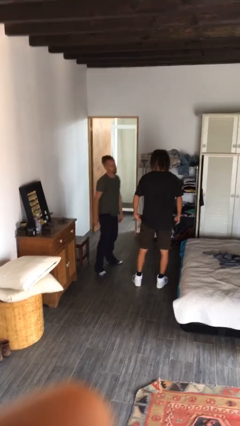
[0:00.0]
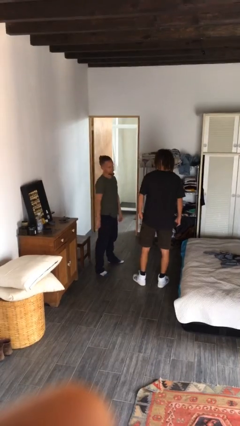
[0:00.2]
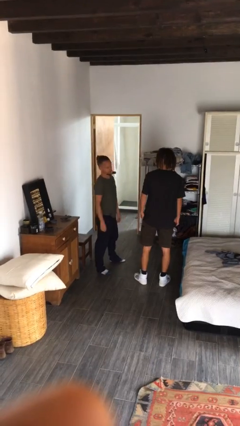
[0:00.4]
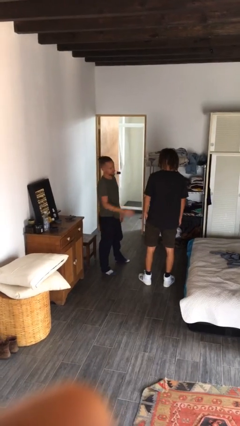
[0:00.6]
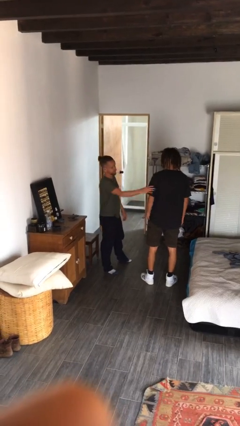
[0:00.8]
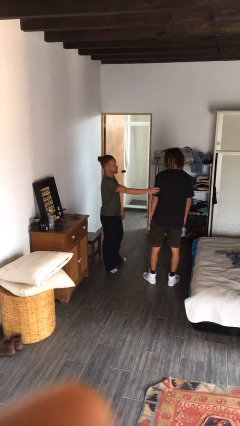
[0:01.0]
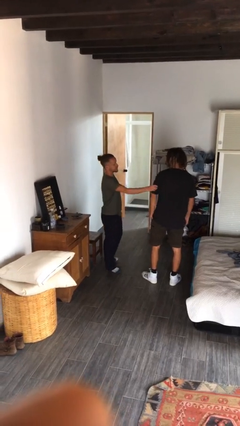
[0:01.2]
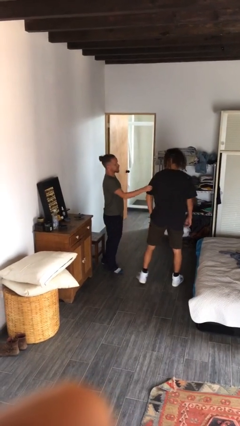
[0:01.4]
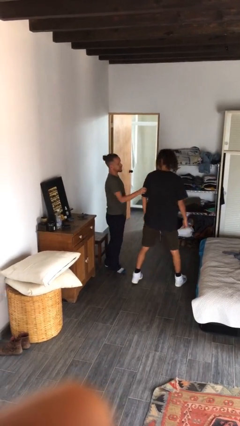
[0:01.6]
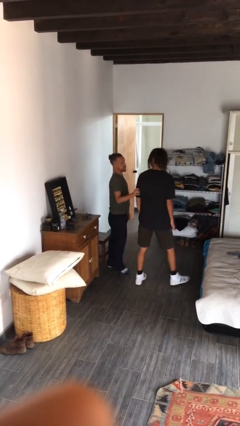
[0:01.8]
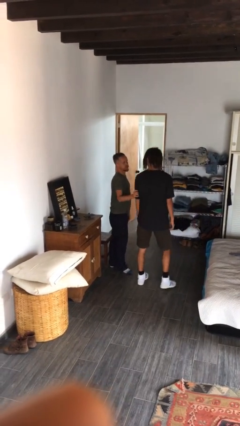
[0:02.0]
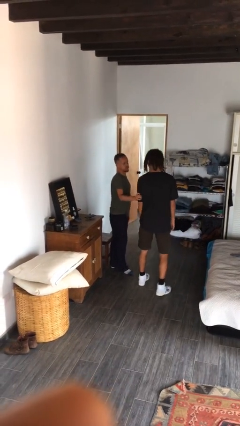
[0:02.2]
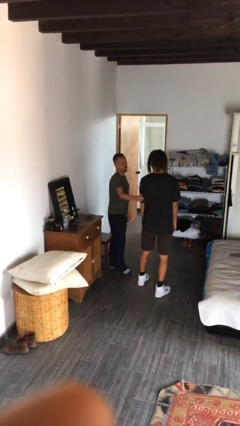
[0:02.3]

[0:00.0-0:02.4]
person grabs person by forearm

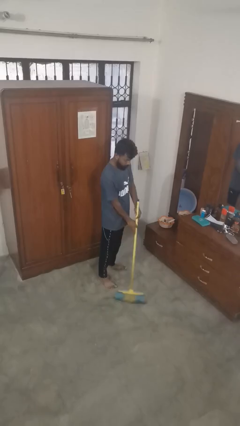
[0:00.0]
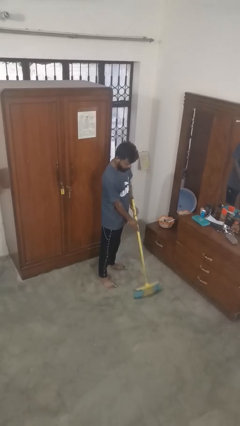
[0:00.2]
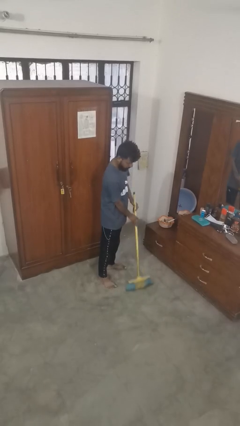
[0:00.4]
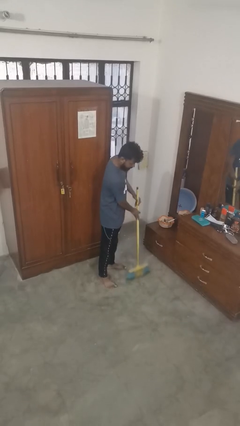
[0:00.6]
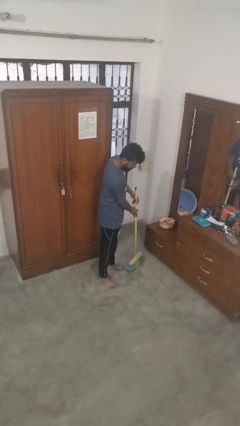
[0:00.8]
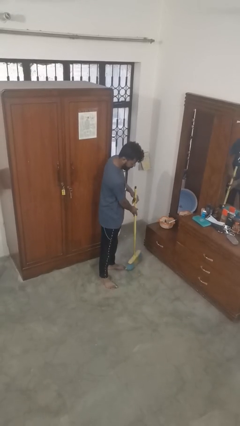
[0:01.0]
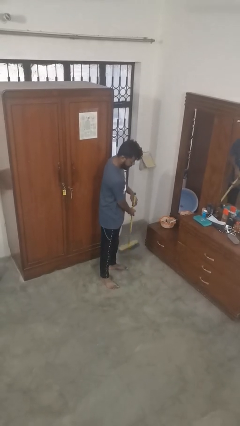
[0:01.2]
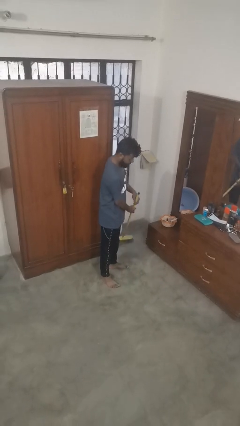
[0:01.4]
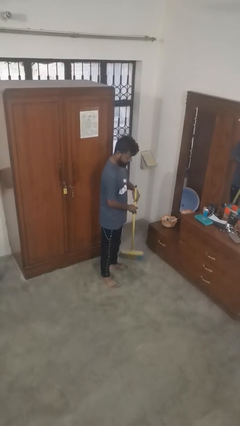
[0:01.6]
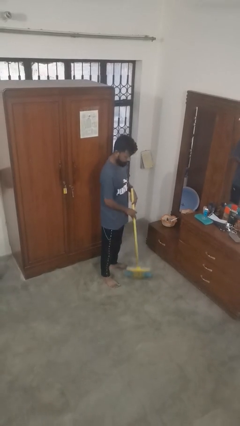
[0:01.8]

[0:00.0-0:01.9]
person sweeps floor

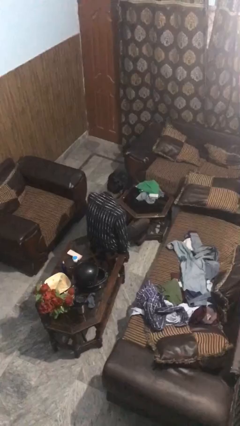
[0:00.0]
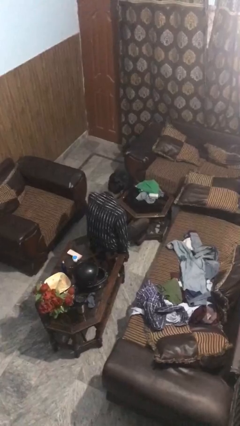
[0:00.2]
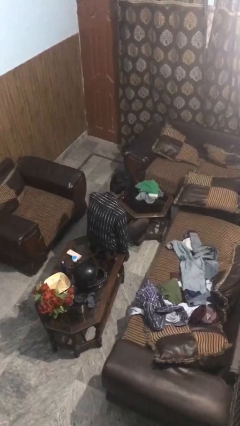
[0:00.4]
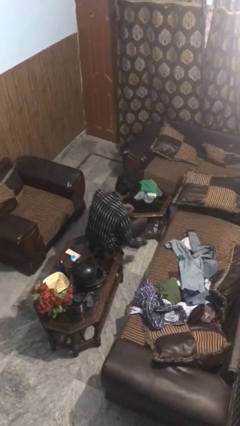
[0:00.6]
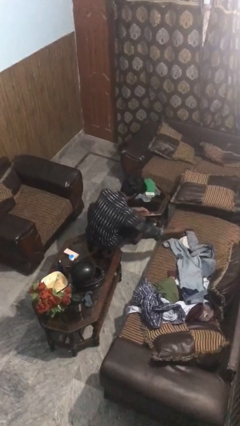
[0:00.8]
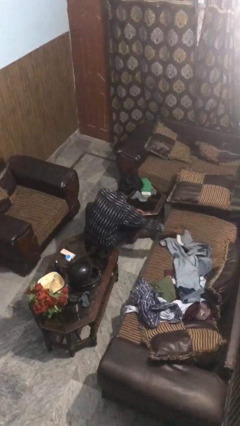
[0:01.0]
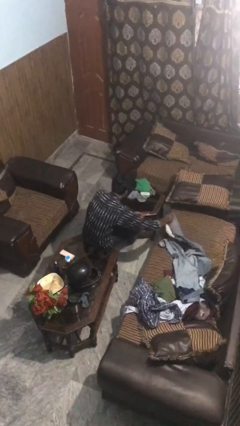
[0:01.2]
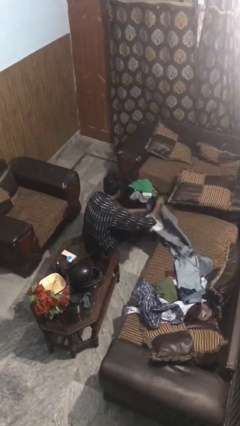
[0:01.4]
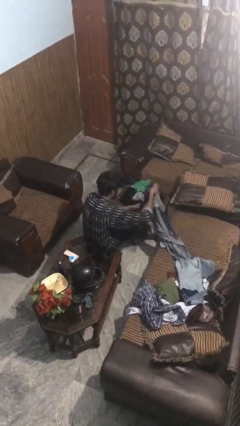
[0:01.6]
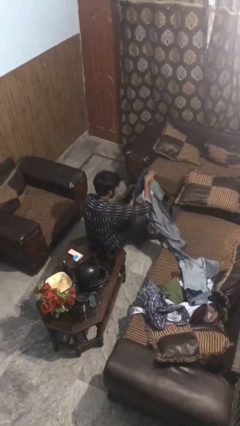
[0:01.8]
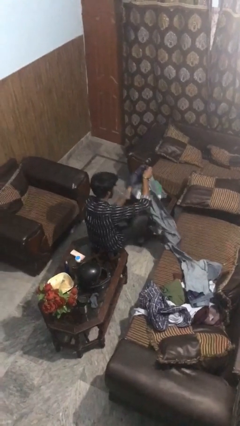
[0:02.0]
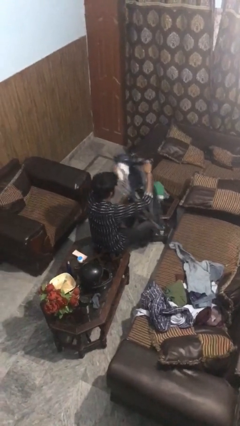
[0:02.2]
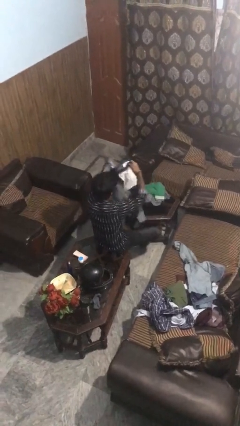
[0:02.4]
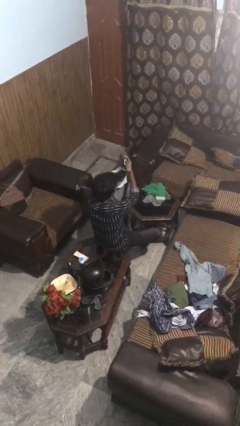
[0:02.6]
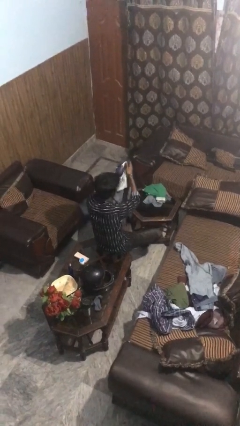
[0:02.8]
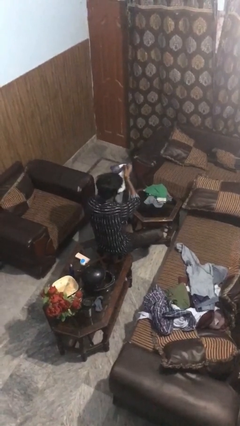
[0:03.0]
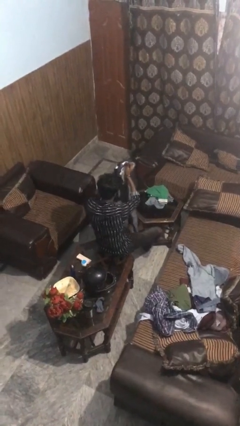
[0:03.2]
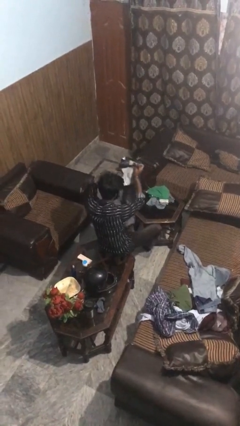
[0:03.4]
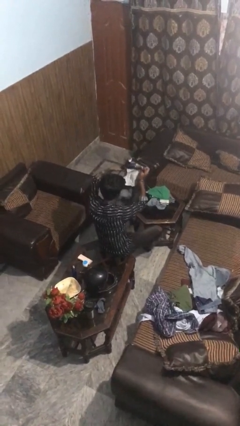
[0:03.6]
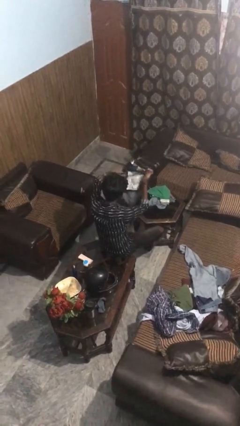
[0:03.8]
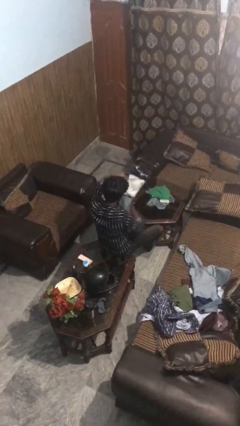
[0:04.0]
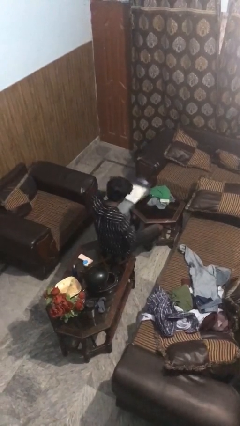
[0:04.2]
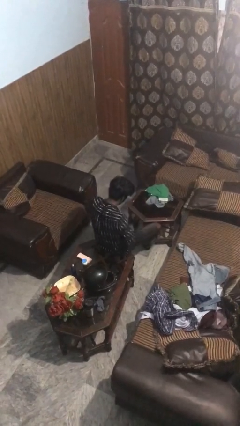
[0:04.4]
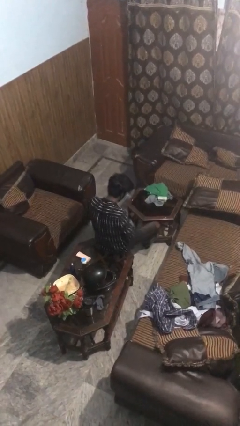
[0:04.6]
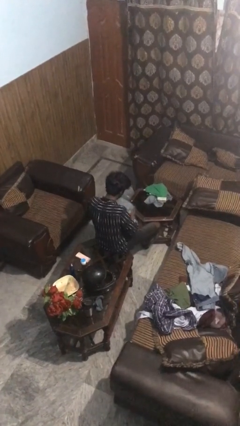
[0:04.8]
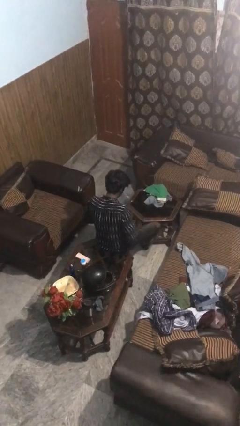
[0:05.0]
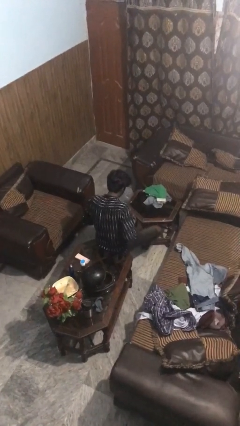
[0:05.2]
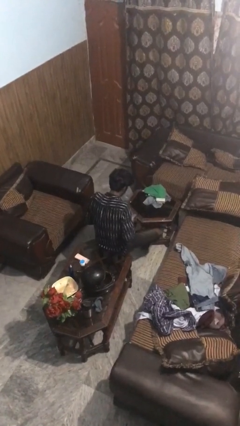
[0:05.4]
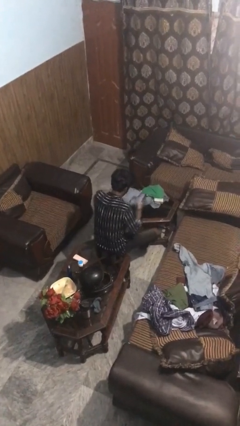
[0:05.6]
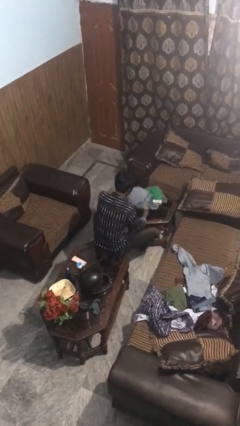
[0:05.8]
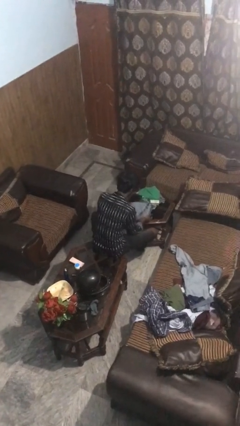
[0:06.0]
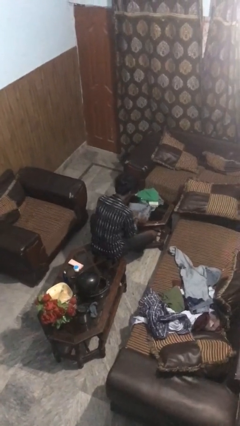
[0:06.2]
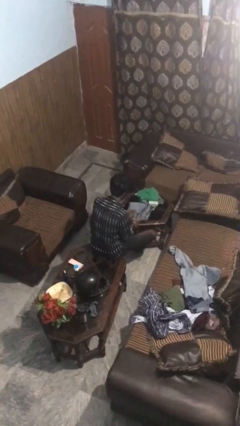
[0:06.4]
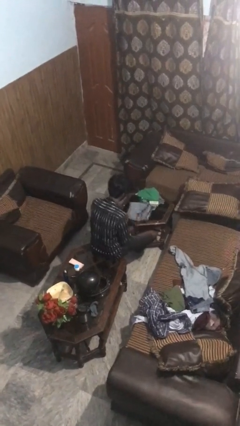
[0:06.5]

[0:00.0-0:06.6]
person folds pants

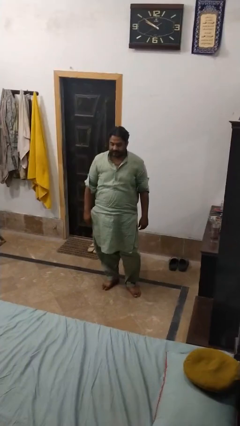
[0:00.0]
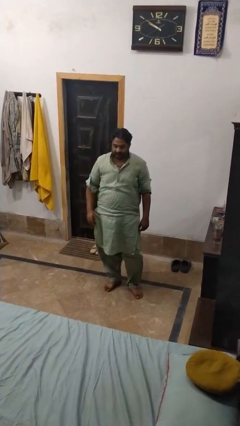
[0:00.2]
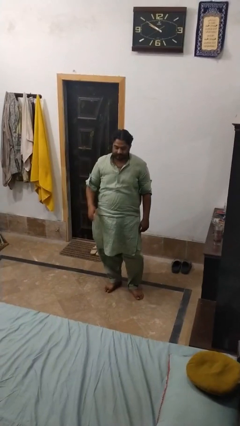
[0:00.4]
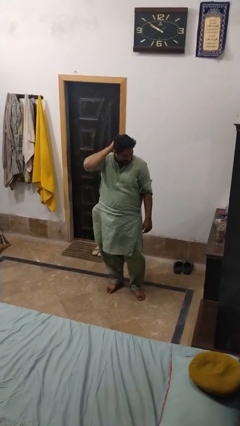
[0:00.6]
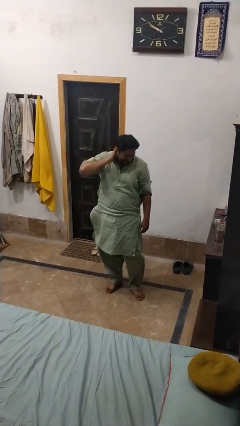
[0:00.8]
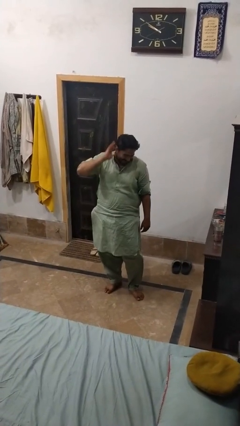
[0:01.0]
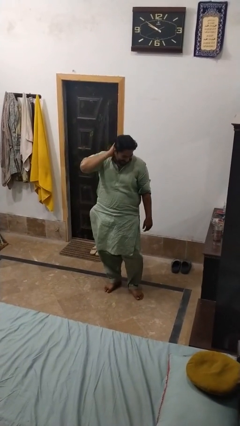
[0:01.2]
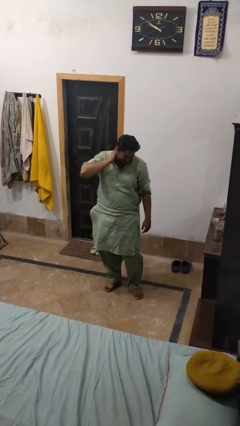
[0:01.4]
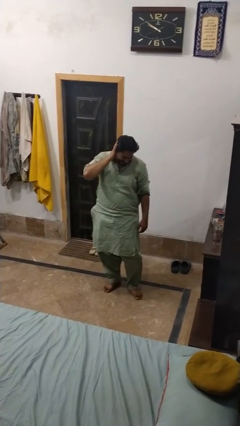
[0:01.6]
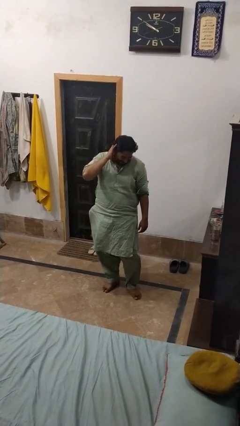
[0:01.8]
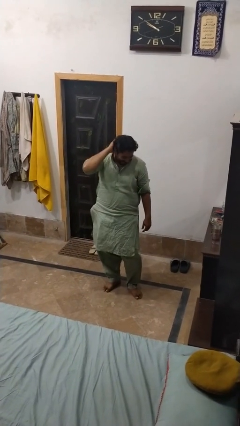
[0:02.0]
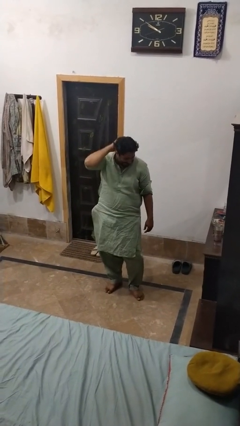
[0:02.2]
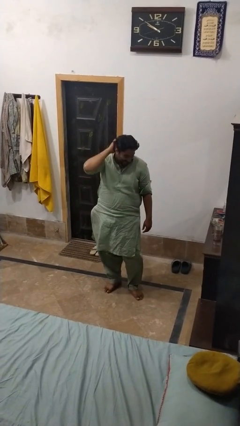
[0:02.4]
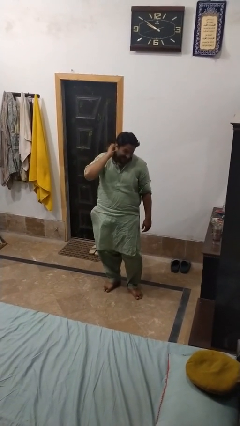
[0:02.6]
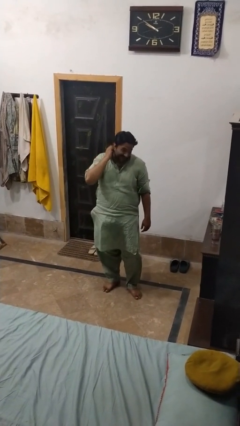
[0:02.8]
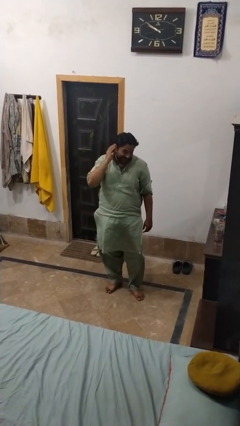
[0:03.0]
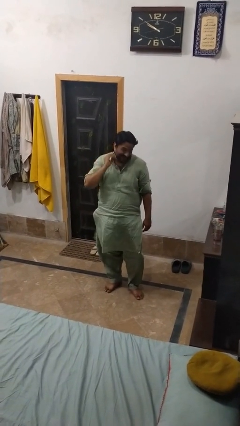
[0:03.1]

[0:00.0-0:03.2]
person swats bug

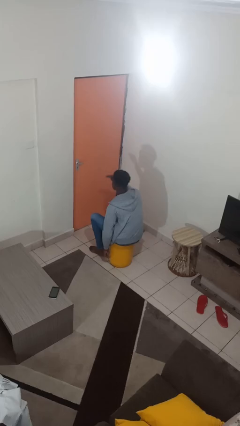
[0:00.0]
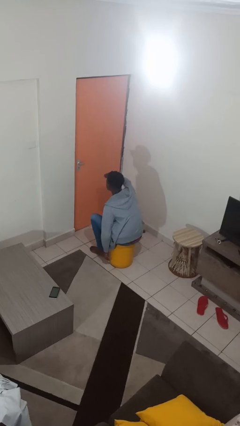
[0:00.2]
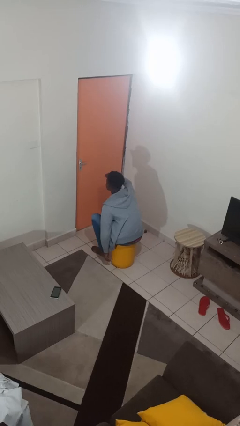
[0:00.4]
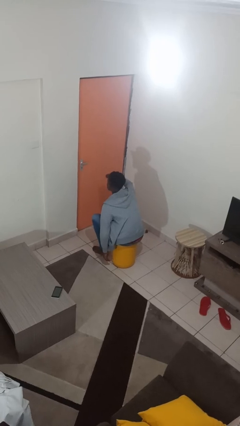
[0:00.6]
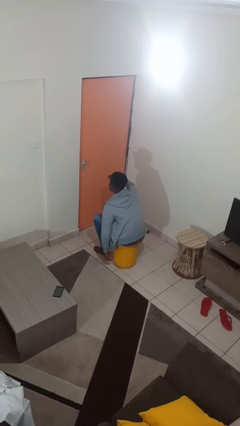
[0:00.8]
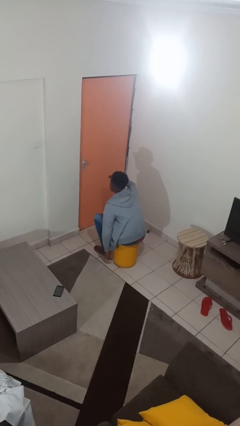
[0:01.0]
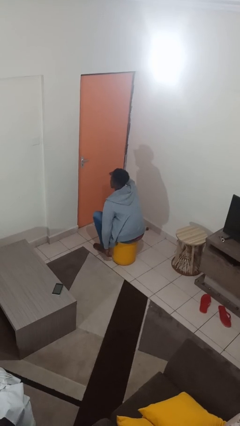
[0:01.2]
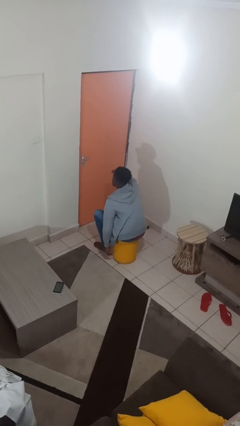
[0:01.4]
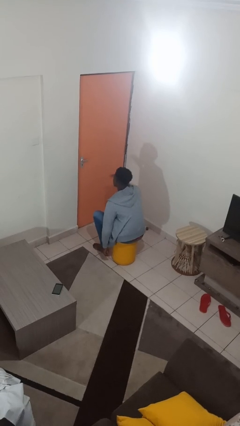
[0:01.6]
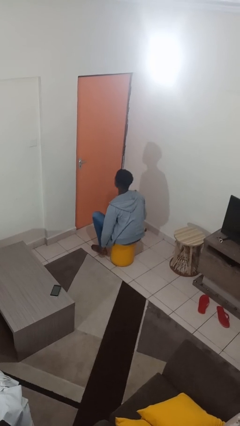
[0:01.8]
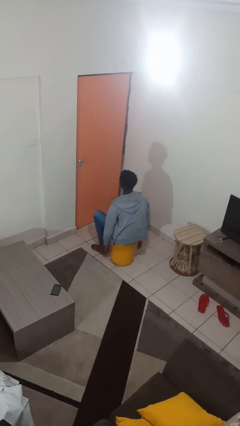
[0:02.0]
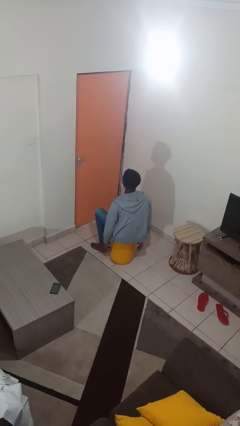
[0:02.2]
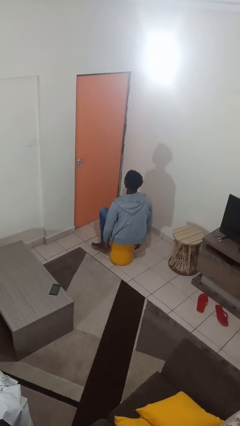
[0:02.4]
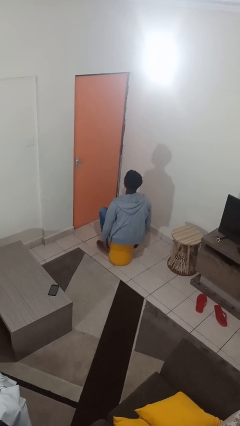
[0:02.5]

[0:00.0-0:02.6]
person shades eyes

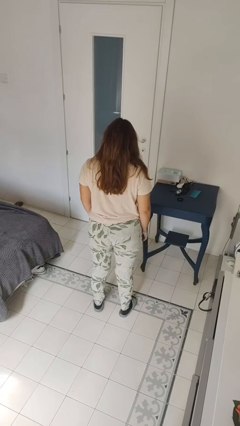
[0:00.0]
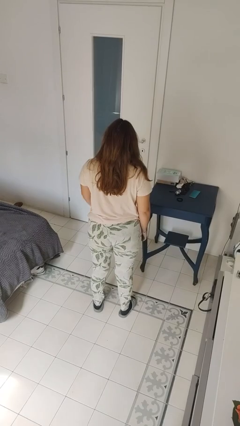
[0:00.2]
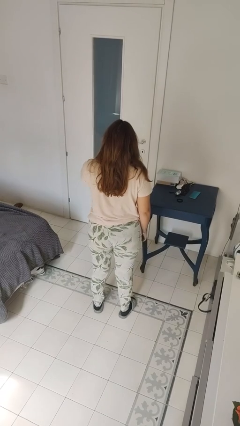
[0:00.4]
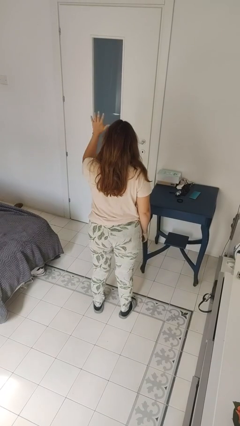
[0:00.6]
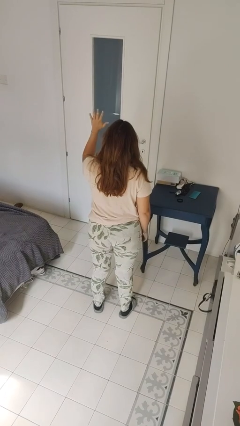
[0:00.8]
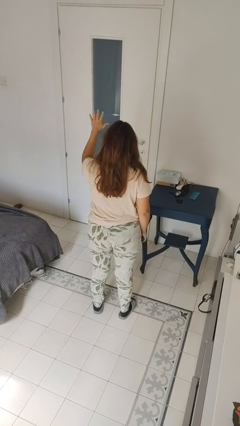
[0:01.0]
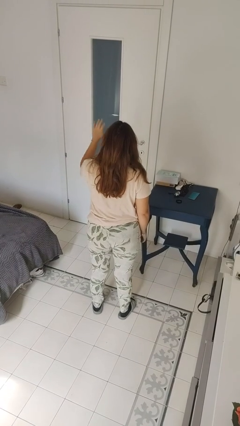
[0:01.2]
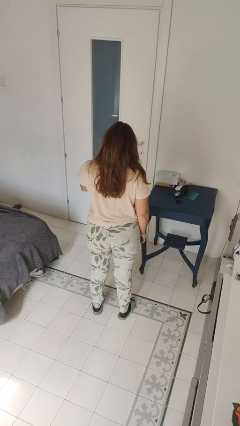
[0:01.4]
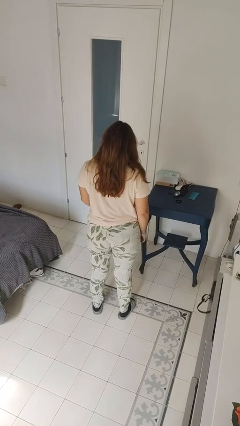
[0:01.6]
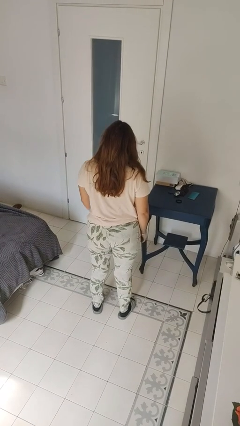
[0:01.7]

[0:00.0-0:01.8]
person gestures number five
